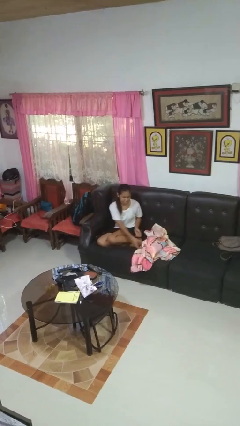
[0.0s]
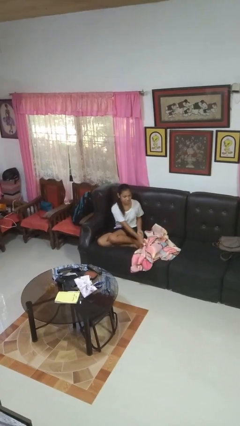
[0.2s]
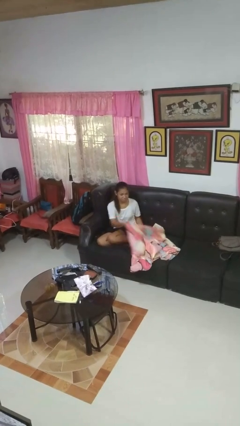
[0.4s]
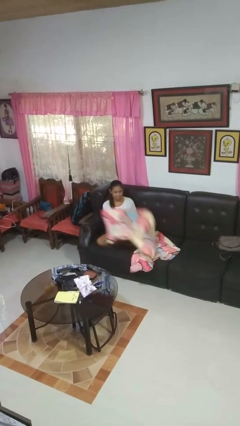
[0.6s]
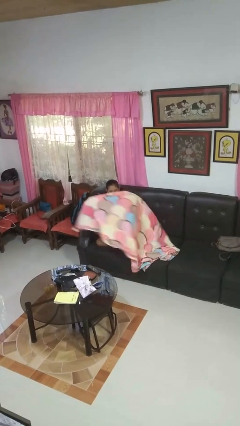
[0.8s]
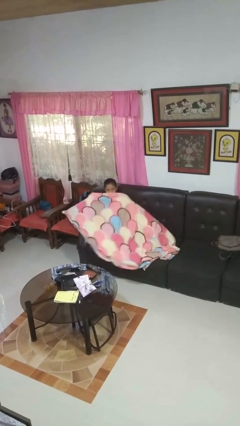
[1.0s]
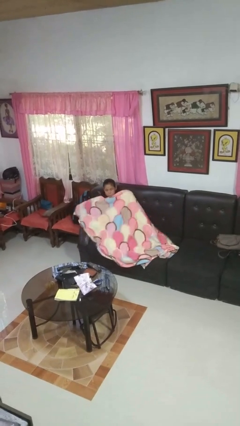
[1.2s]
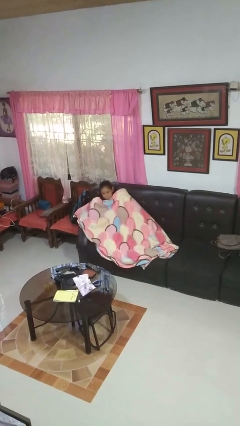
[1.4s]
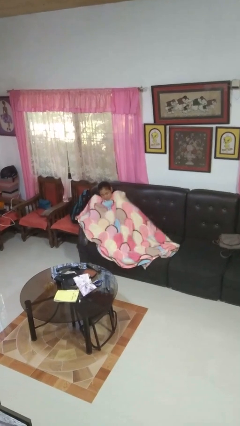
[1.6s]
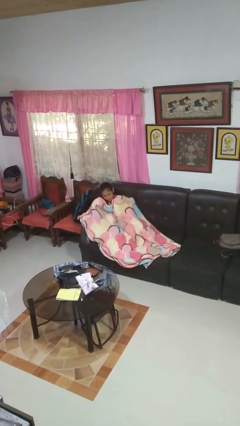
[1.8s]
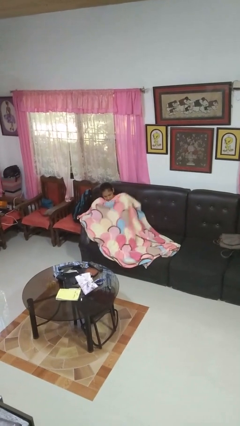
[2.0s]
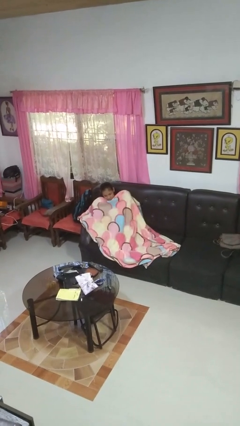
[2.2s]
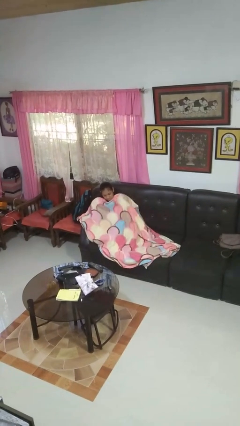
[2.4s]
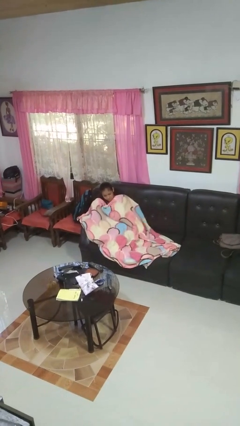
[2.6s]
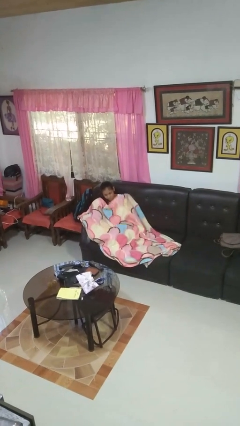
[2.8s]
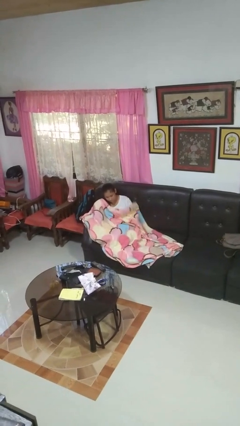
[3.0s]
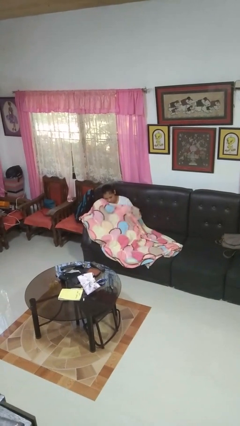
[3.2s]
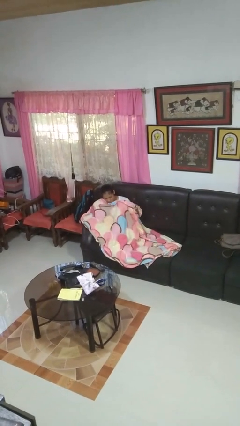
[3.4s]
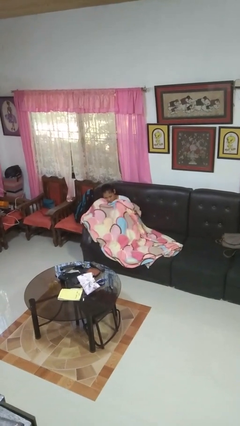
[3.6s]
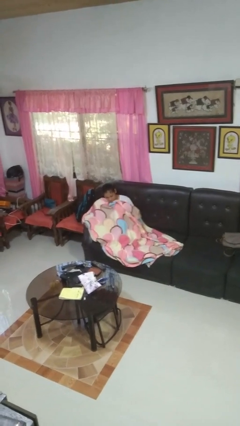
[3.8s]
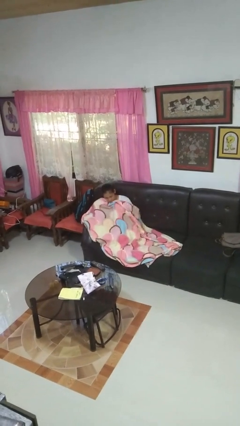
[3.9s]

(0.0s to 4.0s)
person covers with blanket

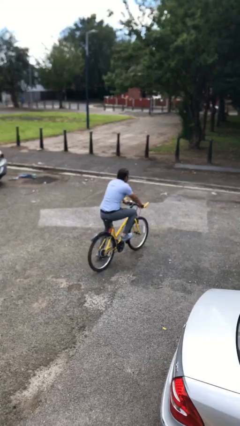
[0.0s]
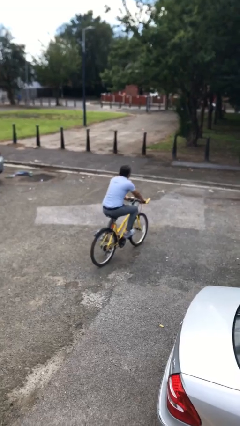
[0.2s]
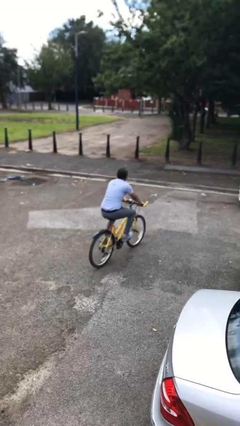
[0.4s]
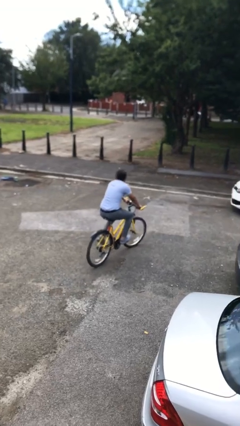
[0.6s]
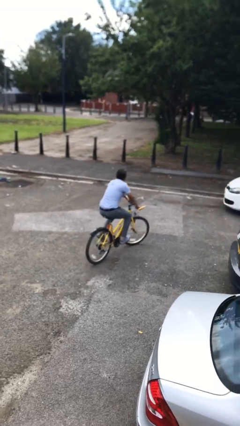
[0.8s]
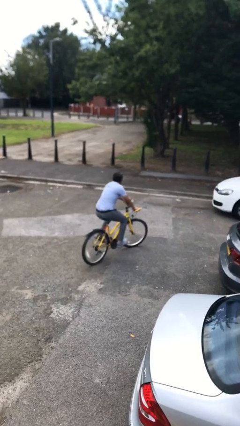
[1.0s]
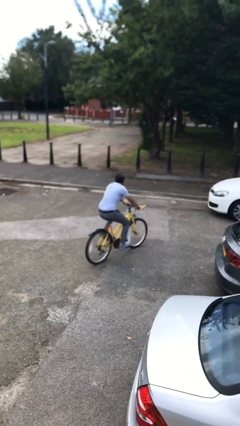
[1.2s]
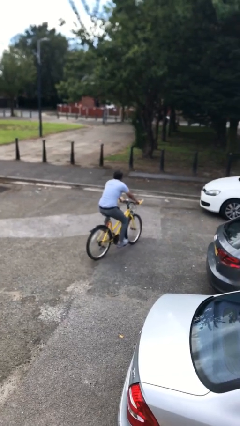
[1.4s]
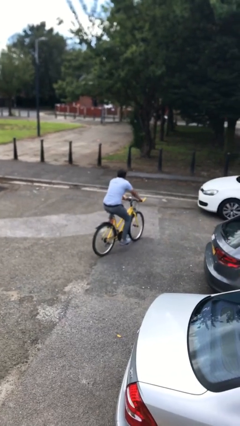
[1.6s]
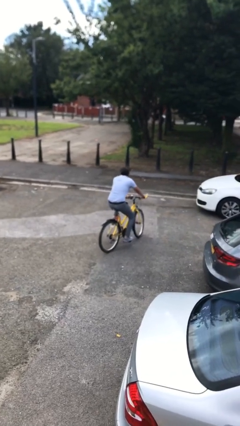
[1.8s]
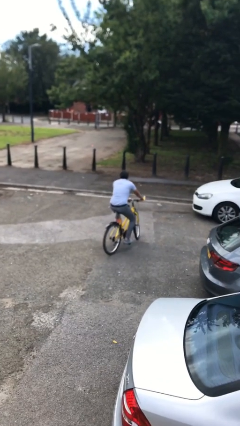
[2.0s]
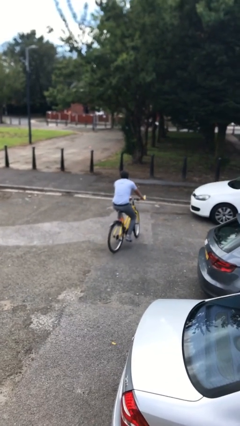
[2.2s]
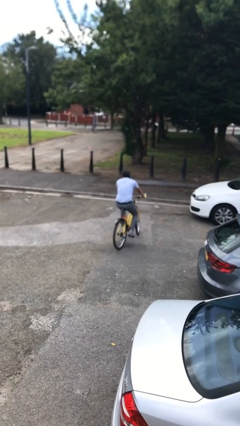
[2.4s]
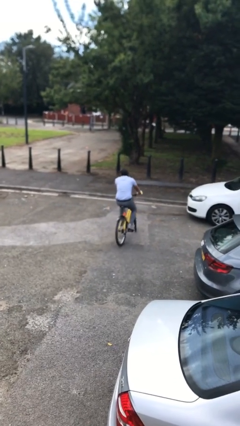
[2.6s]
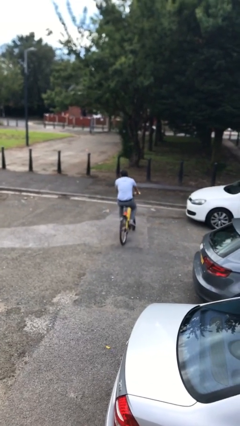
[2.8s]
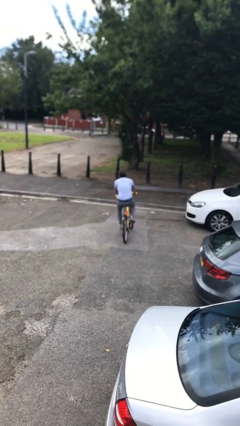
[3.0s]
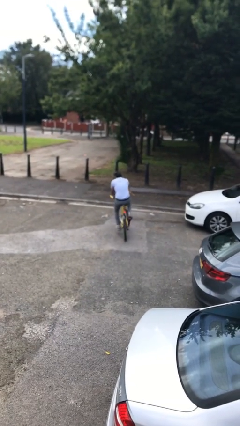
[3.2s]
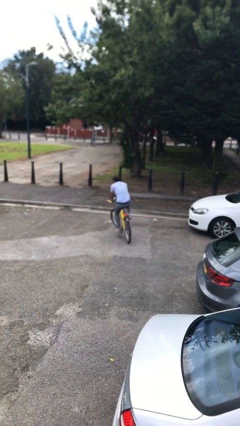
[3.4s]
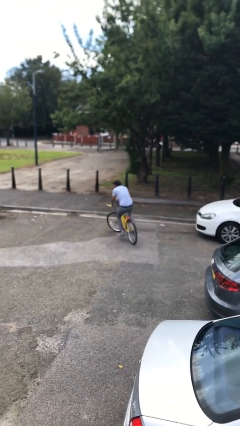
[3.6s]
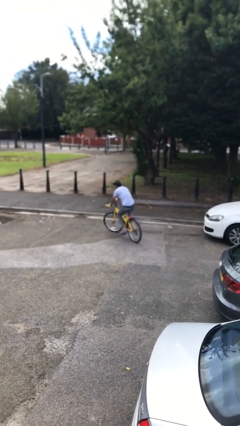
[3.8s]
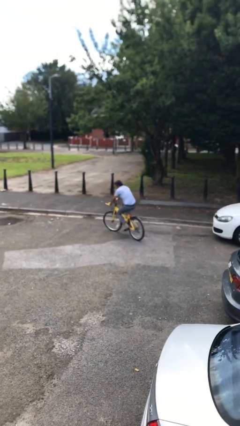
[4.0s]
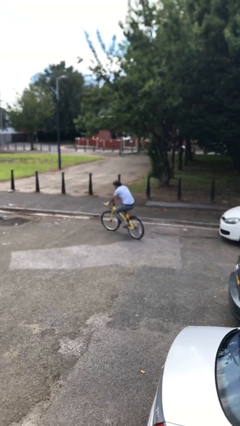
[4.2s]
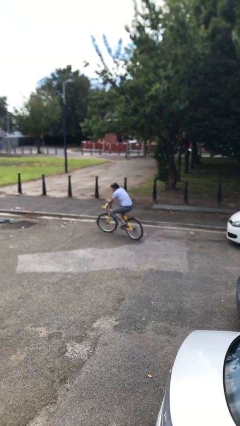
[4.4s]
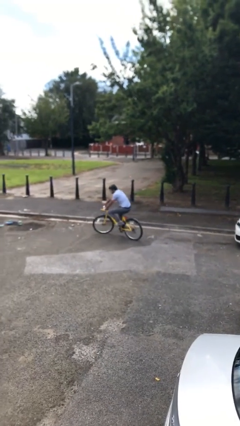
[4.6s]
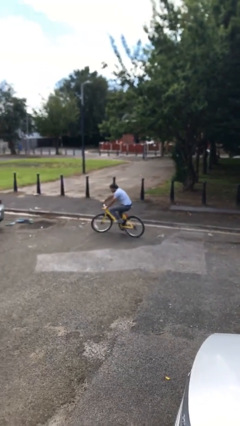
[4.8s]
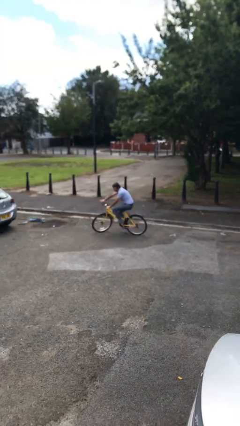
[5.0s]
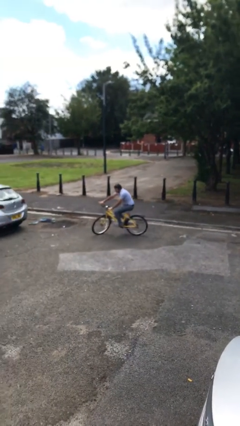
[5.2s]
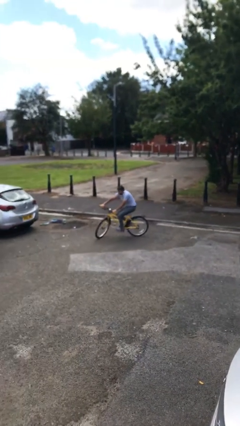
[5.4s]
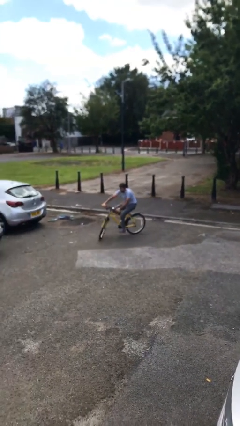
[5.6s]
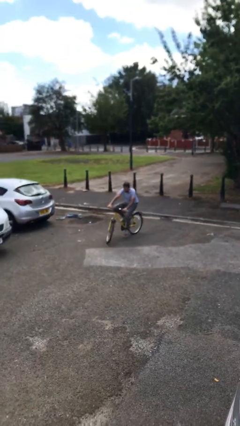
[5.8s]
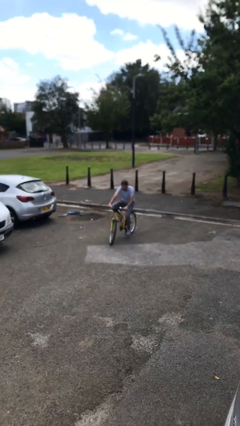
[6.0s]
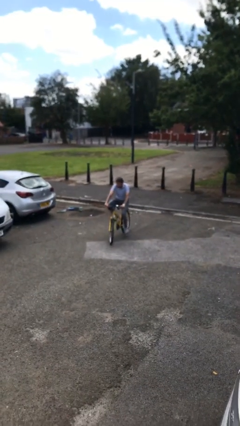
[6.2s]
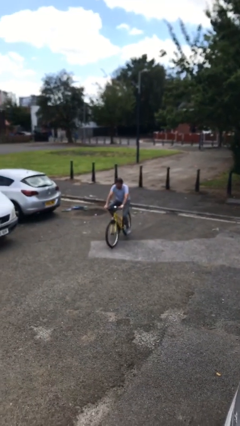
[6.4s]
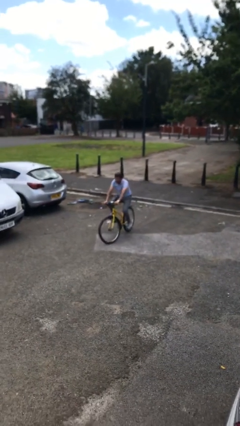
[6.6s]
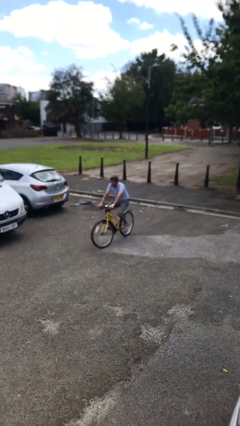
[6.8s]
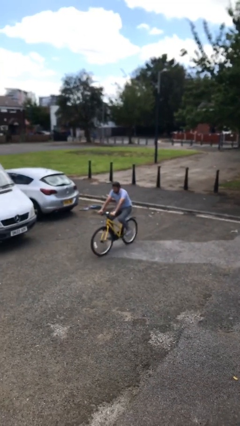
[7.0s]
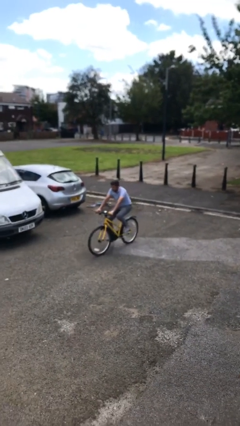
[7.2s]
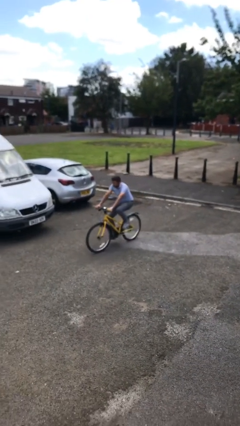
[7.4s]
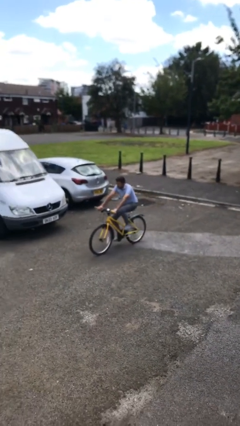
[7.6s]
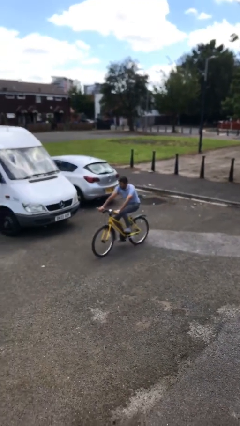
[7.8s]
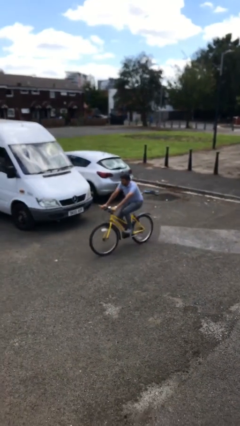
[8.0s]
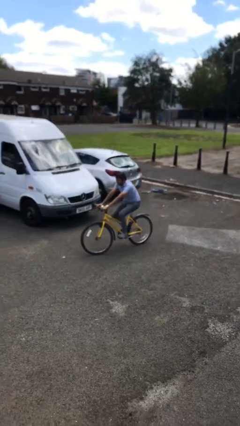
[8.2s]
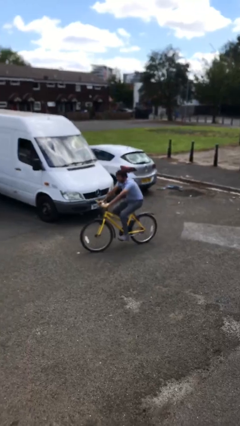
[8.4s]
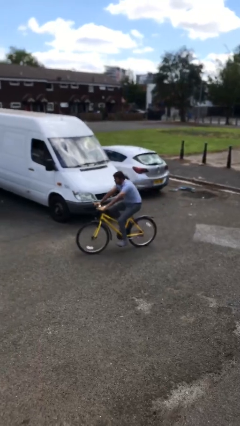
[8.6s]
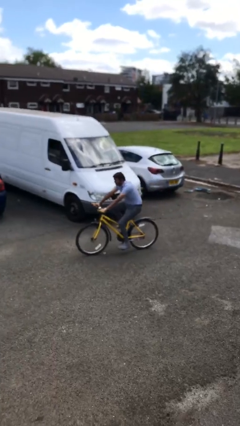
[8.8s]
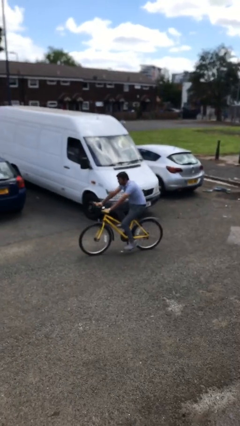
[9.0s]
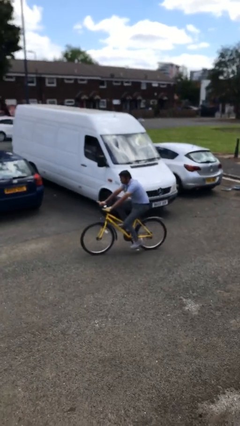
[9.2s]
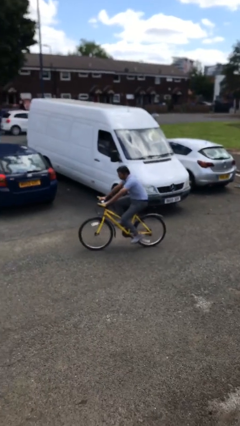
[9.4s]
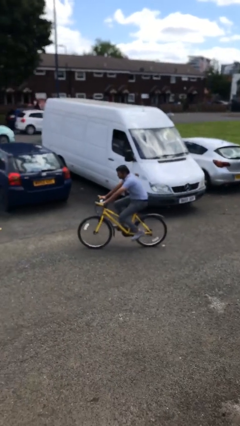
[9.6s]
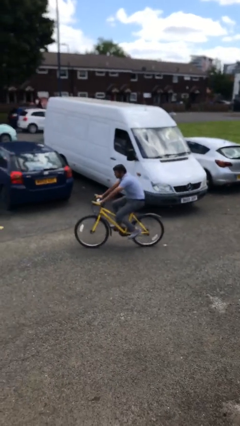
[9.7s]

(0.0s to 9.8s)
person rides bicycle

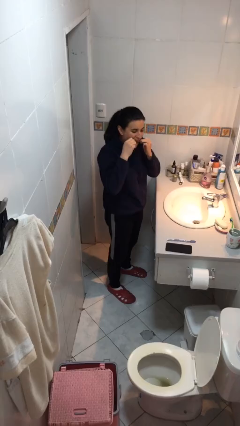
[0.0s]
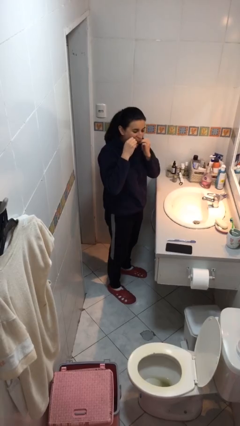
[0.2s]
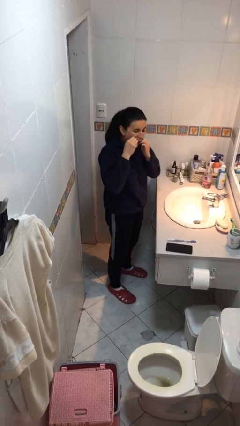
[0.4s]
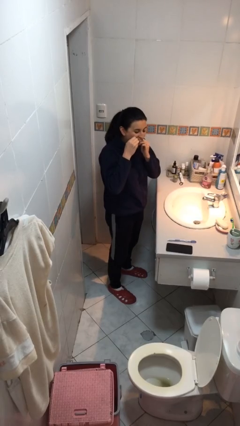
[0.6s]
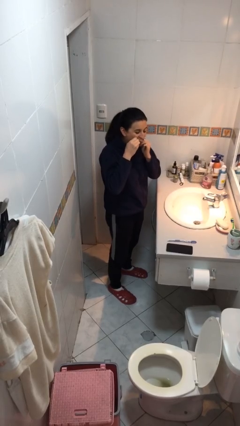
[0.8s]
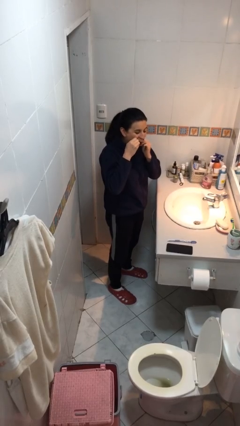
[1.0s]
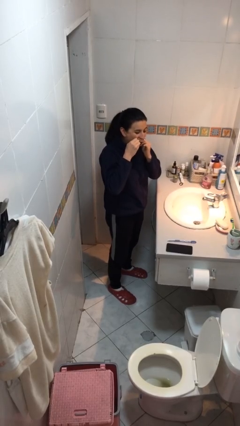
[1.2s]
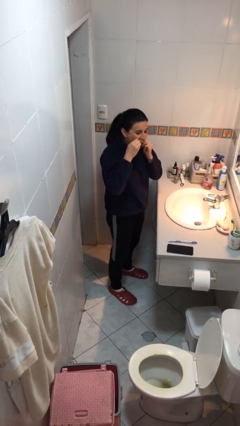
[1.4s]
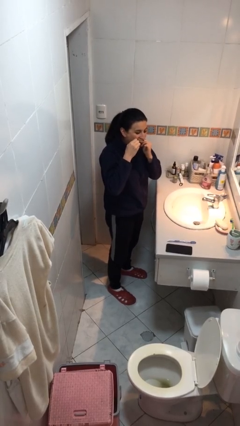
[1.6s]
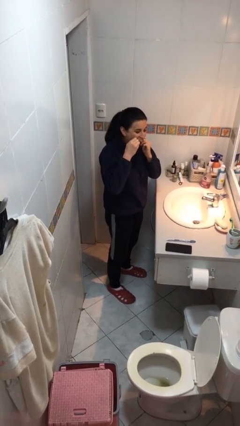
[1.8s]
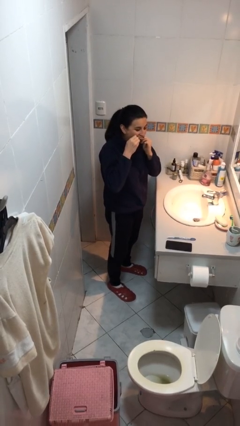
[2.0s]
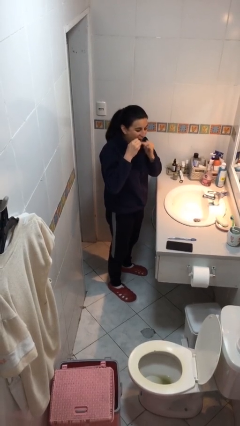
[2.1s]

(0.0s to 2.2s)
person flosses

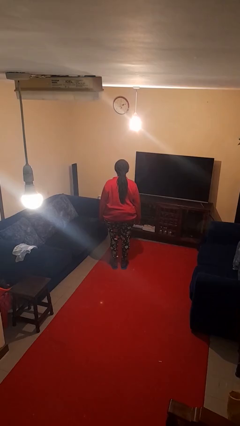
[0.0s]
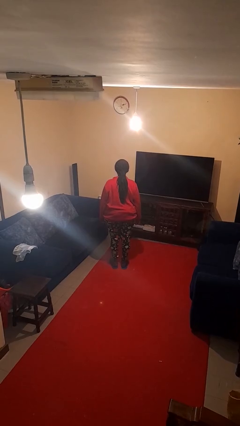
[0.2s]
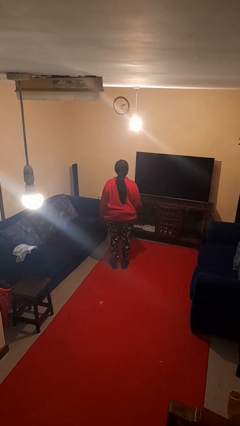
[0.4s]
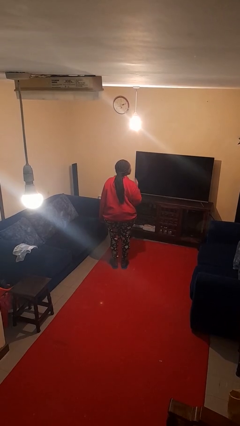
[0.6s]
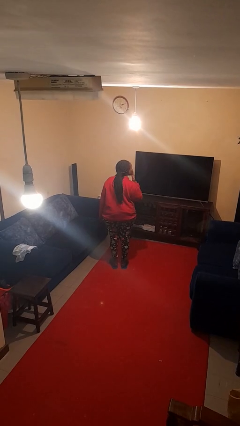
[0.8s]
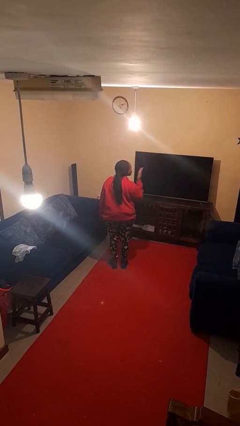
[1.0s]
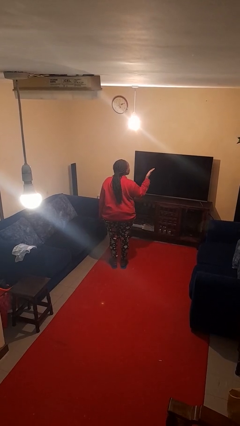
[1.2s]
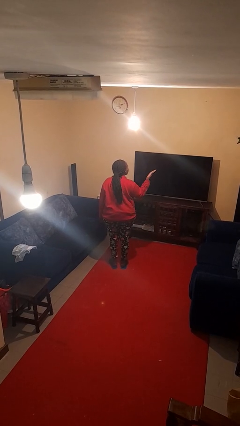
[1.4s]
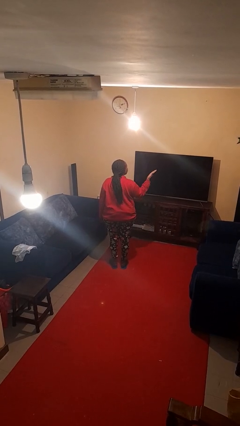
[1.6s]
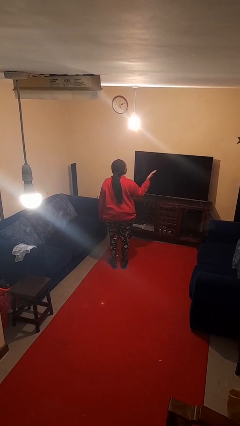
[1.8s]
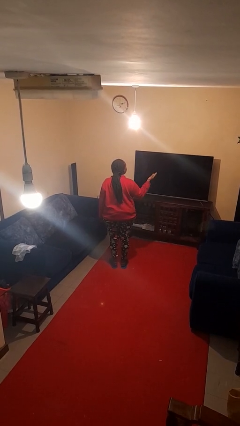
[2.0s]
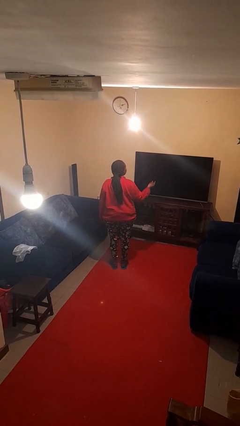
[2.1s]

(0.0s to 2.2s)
person gestures blow kiss
